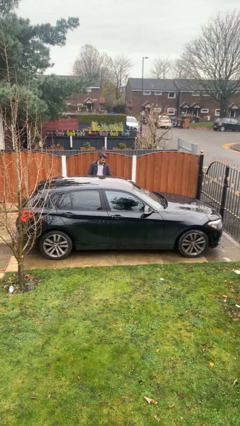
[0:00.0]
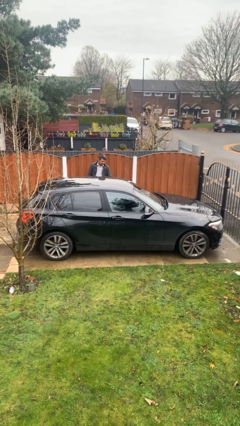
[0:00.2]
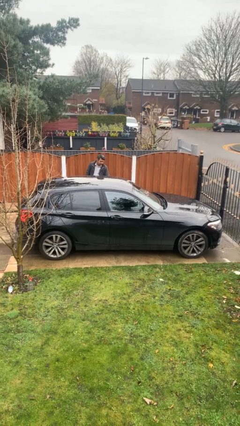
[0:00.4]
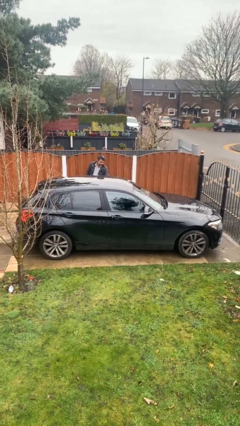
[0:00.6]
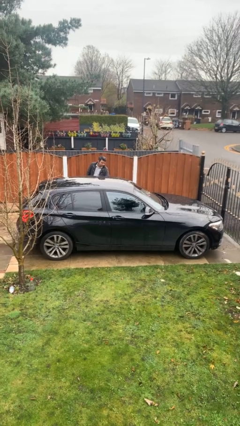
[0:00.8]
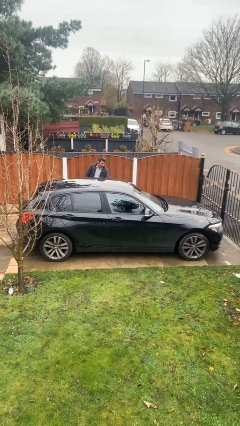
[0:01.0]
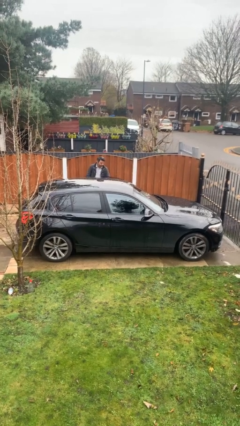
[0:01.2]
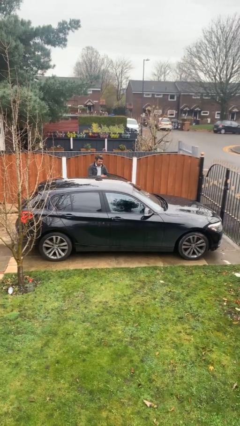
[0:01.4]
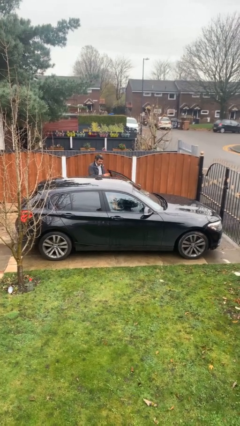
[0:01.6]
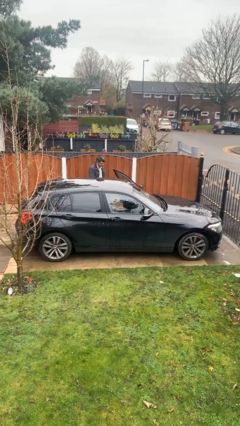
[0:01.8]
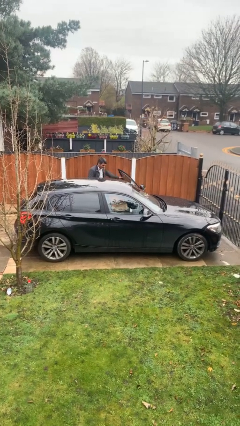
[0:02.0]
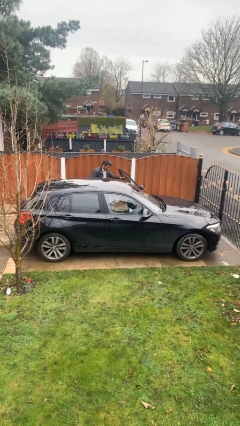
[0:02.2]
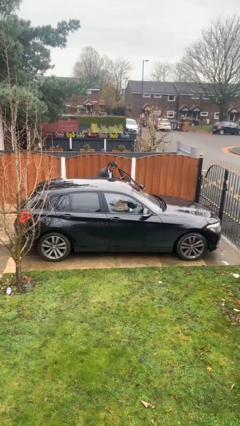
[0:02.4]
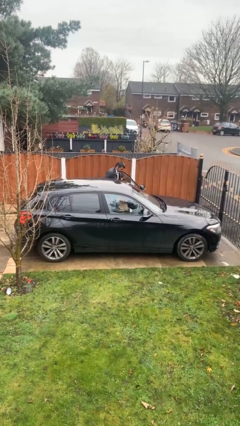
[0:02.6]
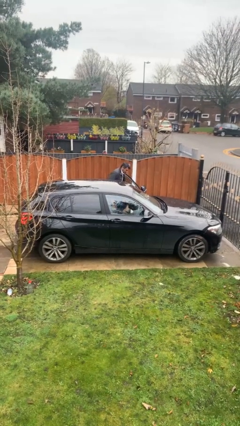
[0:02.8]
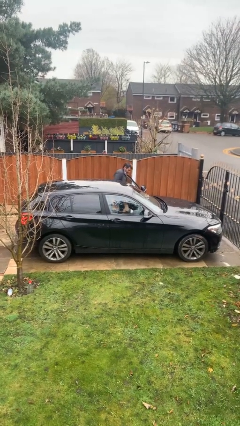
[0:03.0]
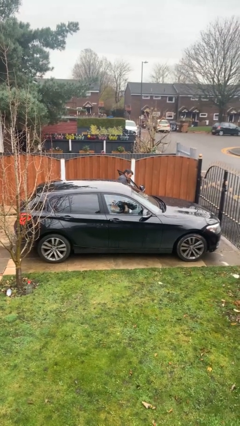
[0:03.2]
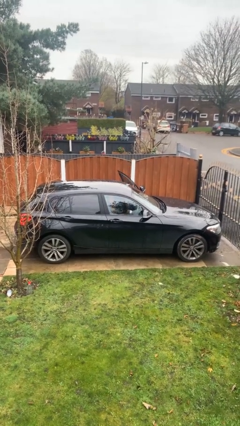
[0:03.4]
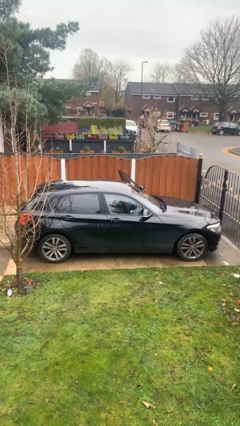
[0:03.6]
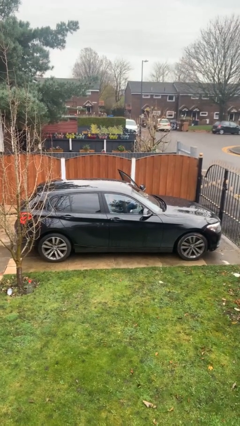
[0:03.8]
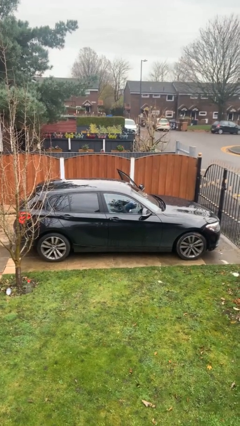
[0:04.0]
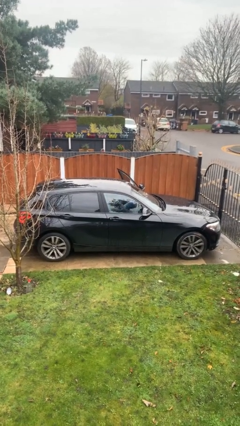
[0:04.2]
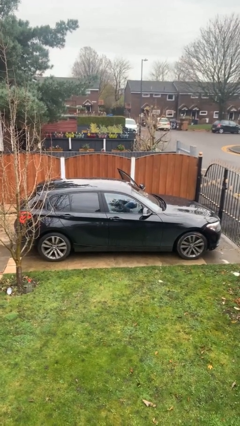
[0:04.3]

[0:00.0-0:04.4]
car picks up person

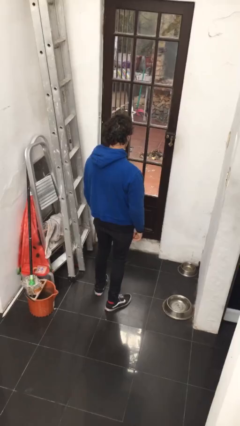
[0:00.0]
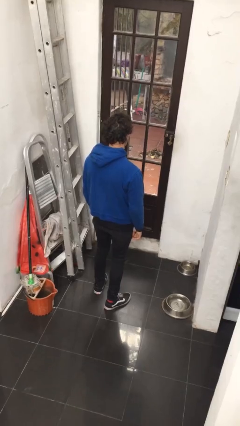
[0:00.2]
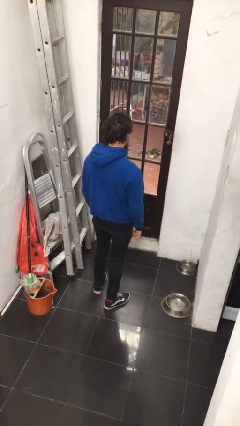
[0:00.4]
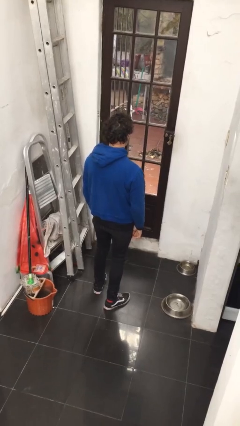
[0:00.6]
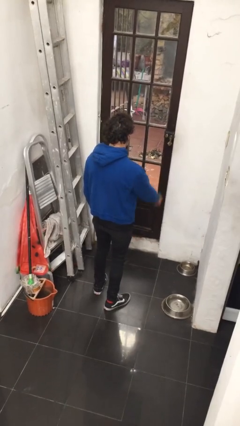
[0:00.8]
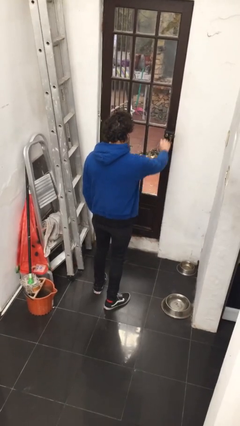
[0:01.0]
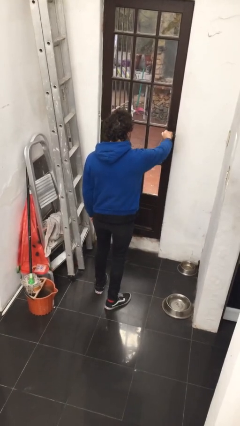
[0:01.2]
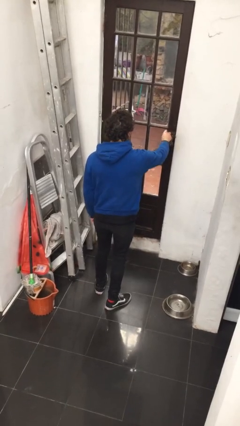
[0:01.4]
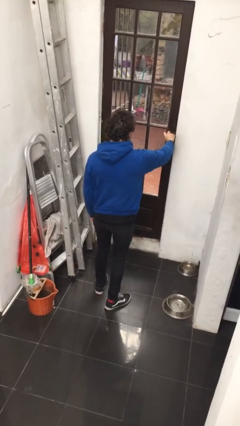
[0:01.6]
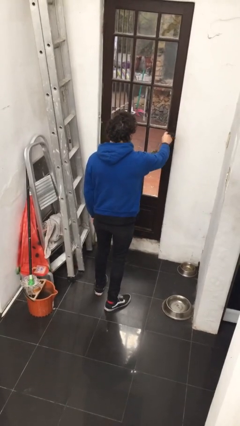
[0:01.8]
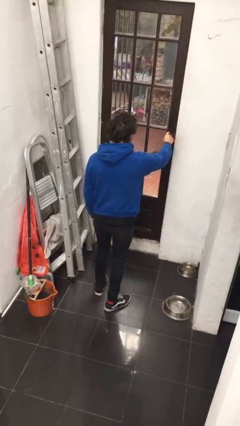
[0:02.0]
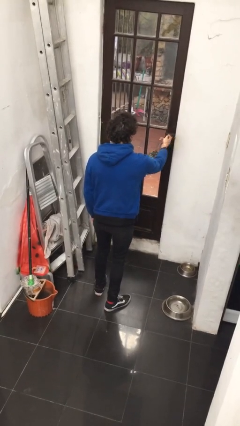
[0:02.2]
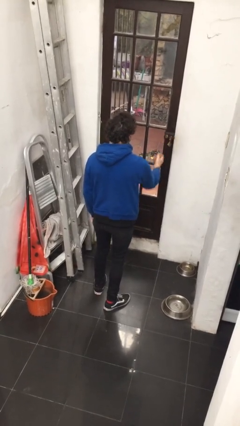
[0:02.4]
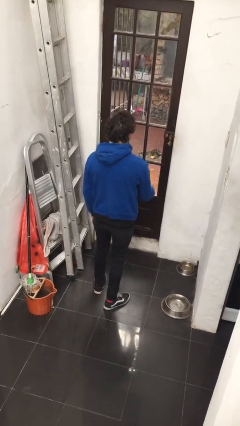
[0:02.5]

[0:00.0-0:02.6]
person locks door with keys

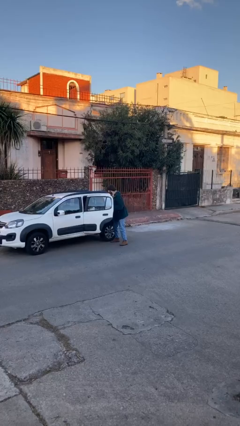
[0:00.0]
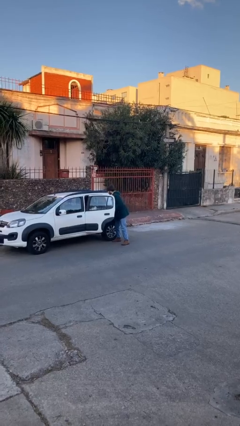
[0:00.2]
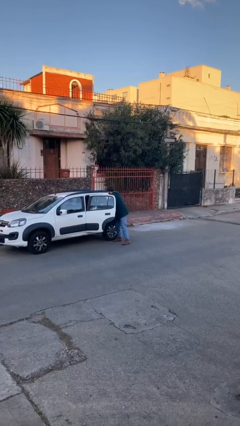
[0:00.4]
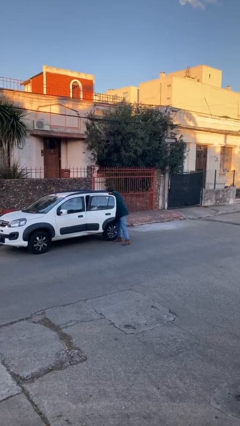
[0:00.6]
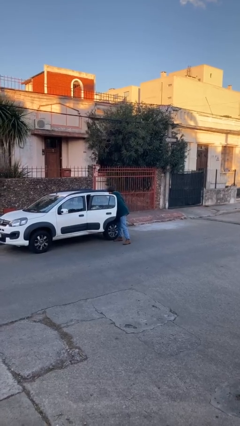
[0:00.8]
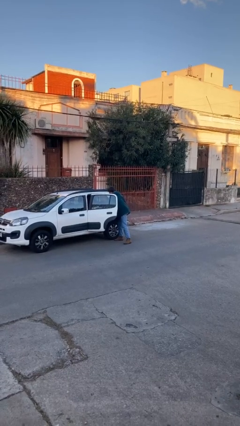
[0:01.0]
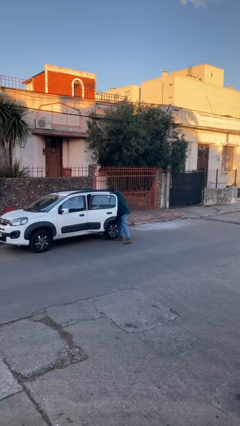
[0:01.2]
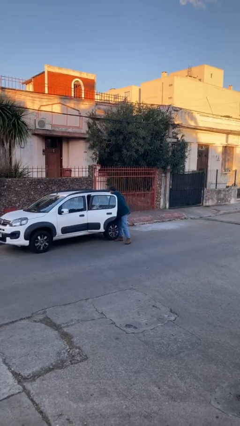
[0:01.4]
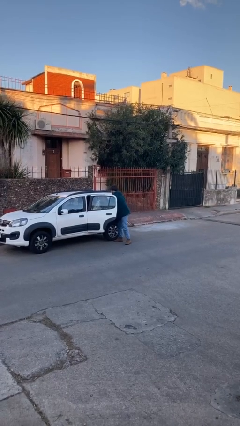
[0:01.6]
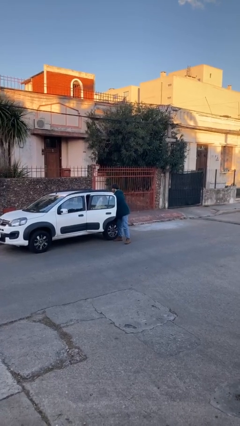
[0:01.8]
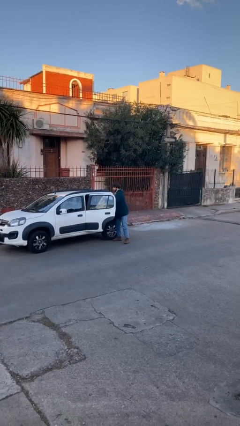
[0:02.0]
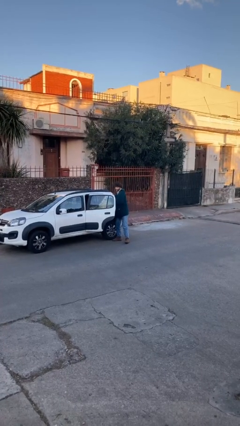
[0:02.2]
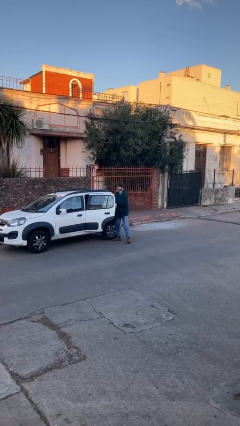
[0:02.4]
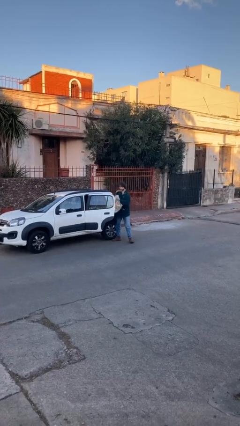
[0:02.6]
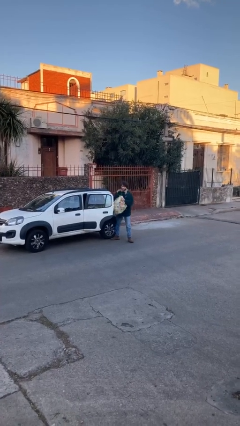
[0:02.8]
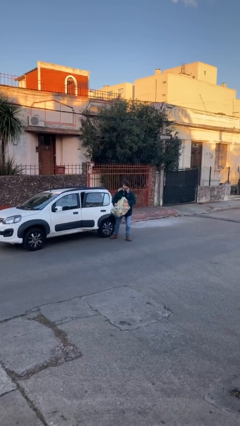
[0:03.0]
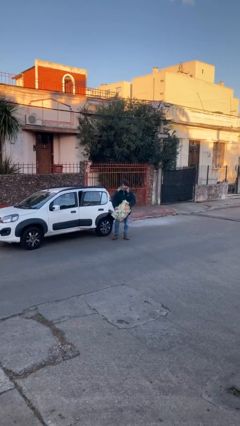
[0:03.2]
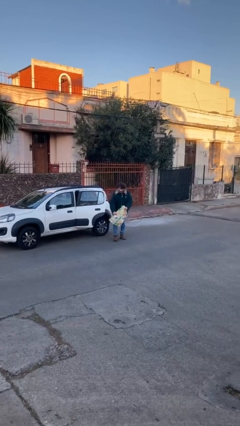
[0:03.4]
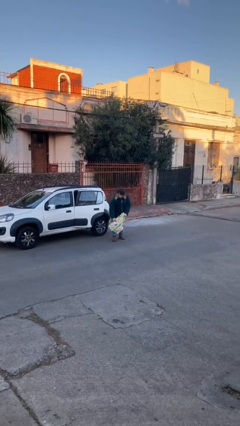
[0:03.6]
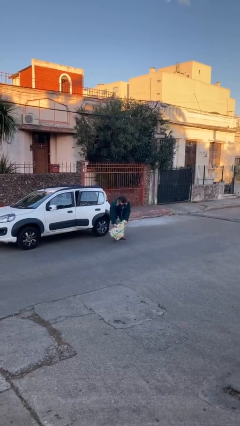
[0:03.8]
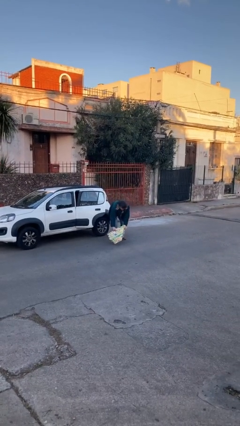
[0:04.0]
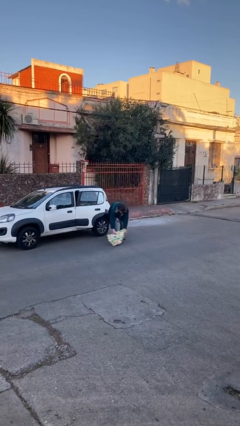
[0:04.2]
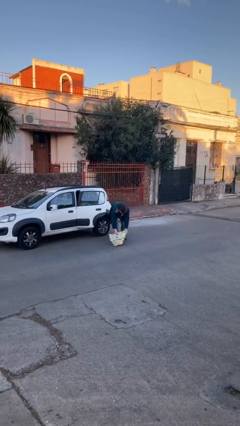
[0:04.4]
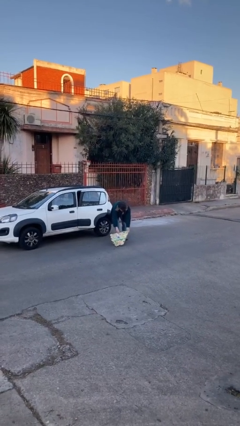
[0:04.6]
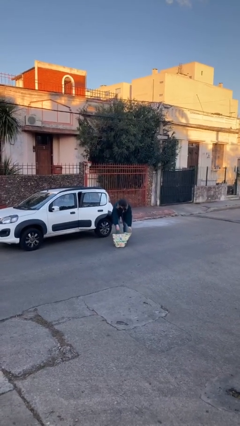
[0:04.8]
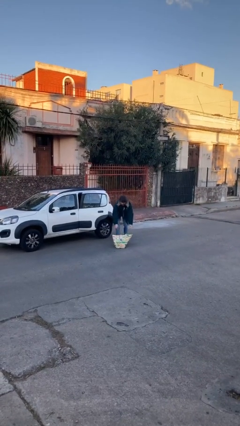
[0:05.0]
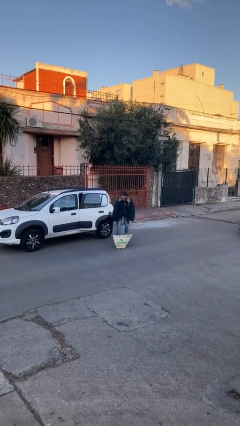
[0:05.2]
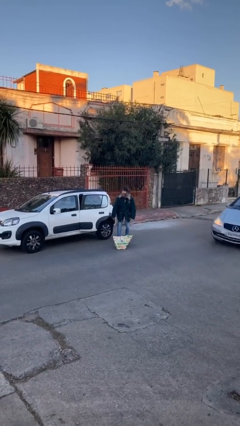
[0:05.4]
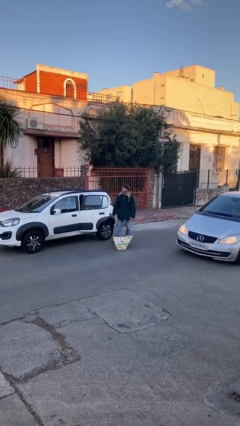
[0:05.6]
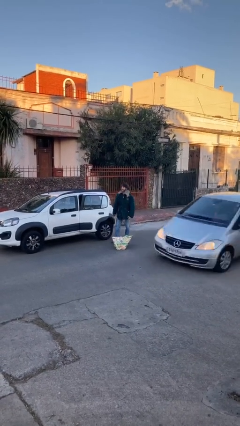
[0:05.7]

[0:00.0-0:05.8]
person unloads car

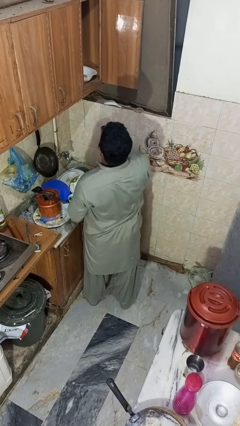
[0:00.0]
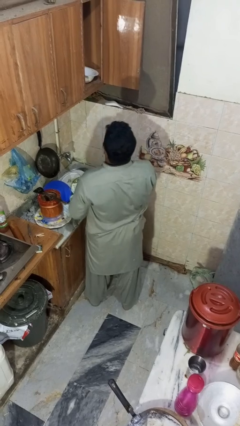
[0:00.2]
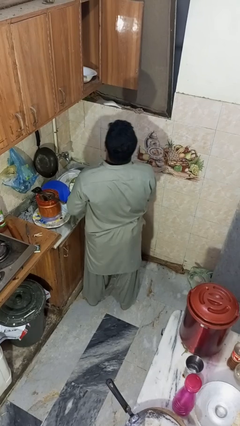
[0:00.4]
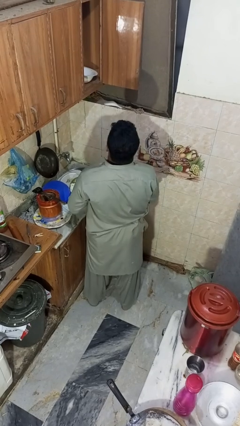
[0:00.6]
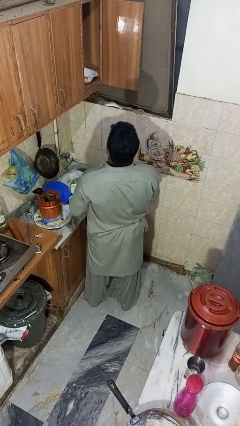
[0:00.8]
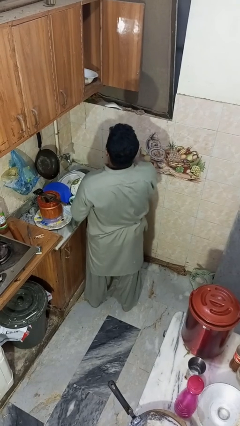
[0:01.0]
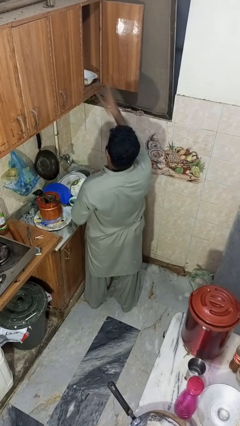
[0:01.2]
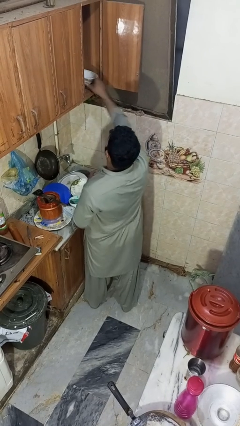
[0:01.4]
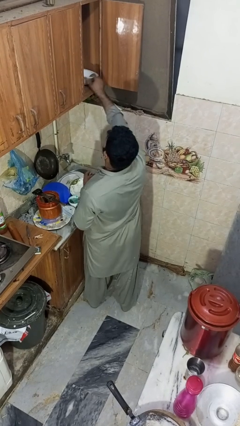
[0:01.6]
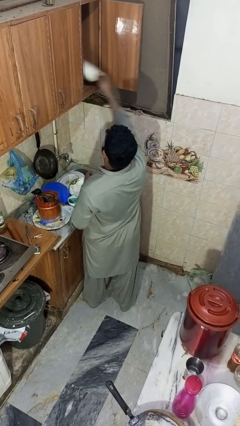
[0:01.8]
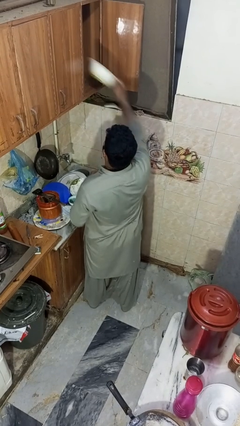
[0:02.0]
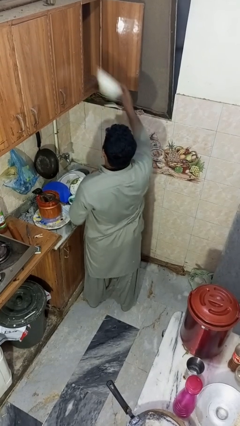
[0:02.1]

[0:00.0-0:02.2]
person takes object from cabinet

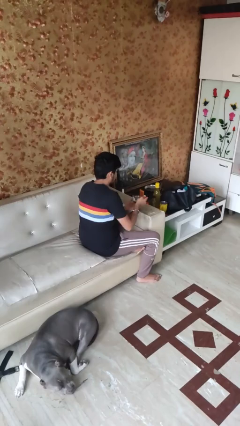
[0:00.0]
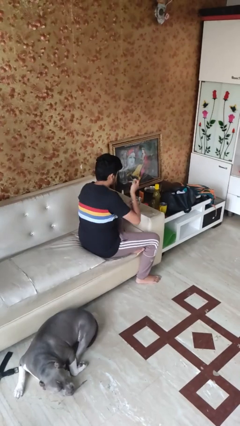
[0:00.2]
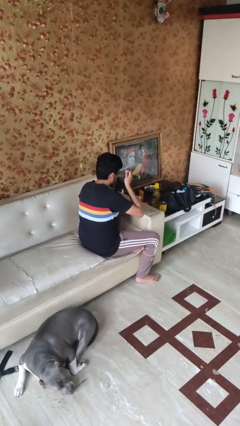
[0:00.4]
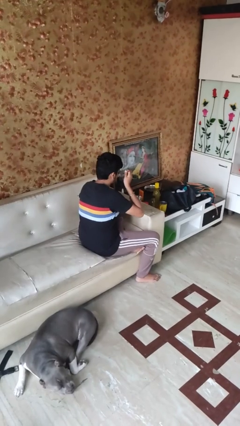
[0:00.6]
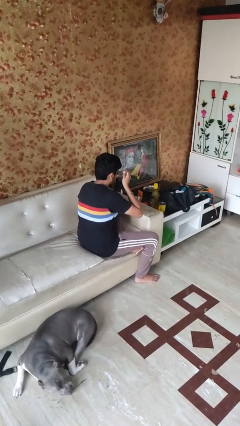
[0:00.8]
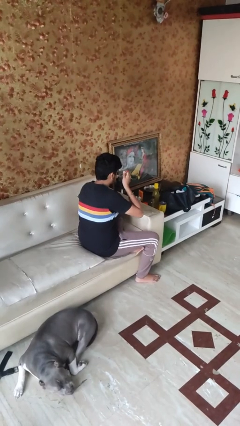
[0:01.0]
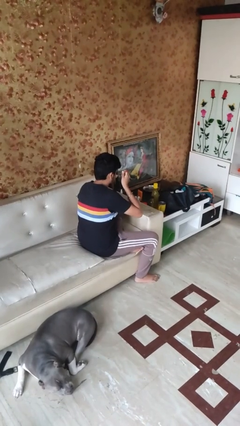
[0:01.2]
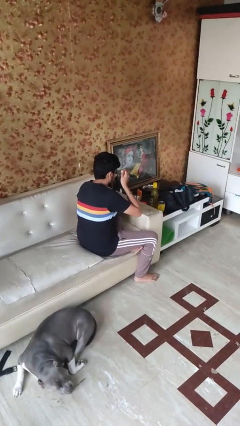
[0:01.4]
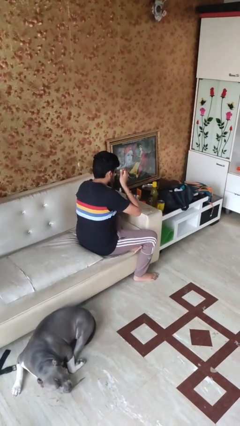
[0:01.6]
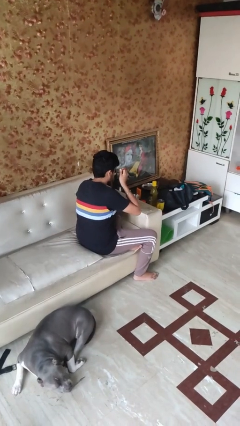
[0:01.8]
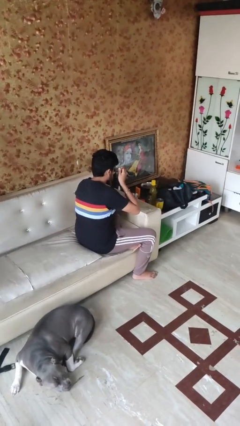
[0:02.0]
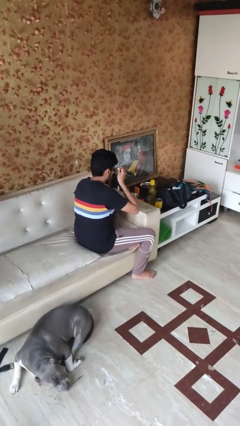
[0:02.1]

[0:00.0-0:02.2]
person eats with utensil

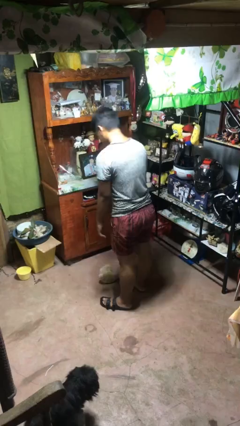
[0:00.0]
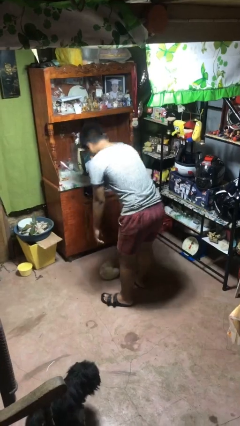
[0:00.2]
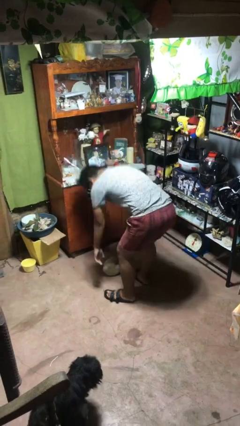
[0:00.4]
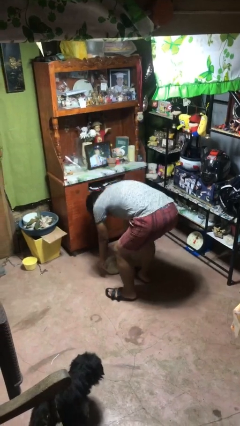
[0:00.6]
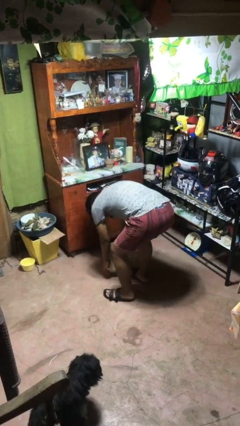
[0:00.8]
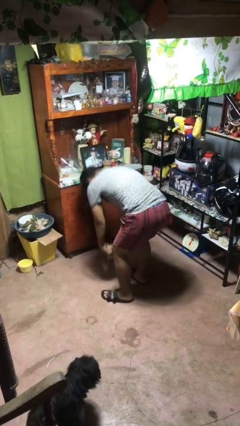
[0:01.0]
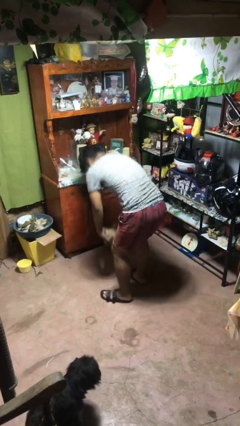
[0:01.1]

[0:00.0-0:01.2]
person picks up object from floor
